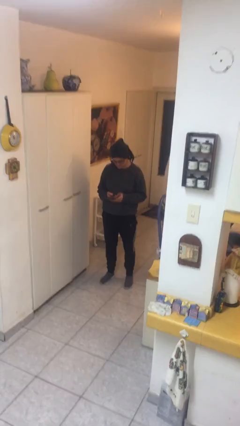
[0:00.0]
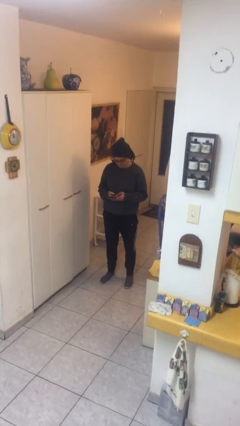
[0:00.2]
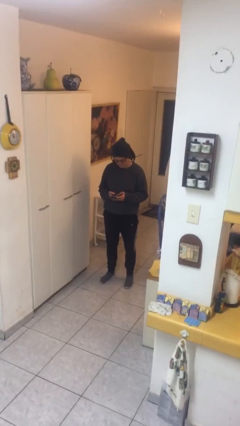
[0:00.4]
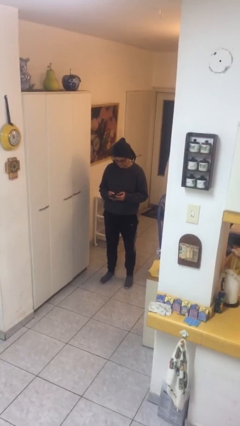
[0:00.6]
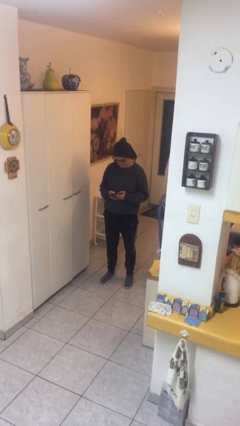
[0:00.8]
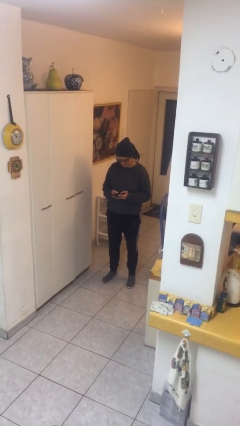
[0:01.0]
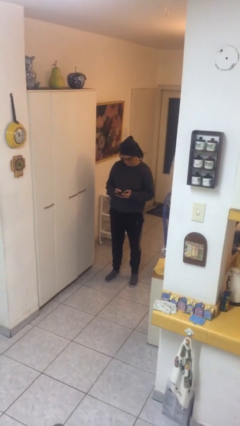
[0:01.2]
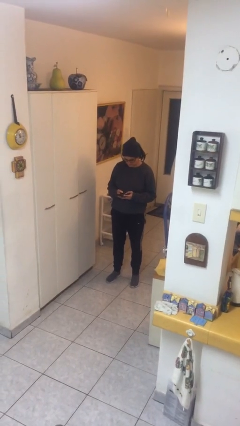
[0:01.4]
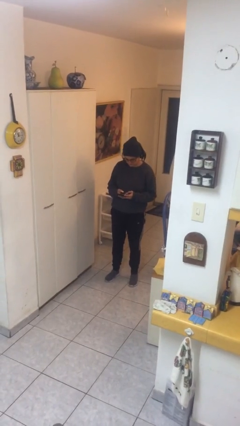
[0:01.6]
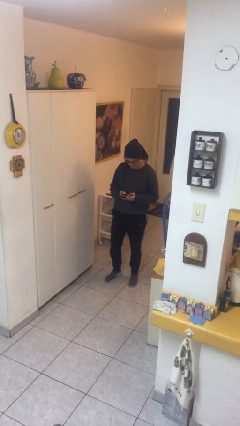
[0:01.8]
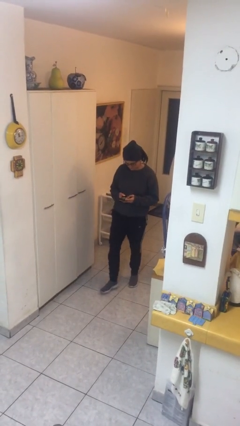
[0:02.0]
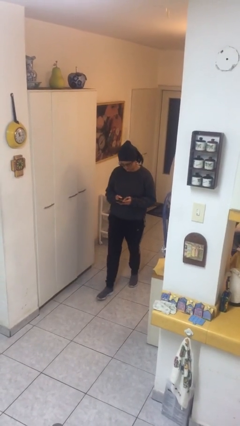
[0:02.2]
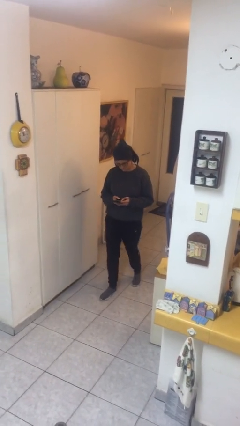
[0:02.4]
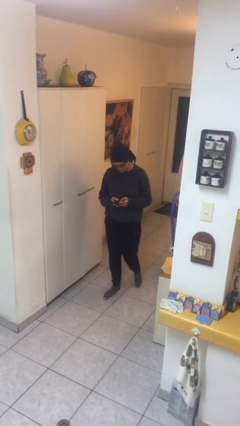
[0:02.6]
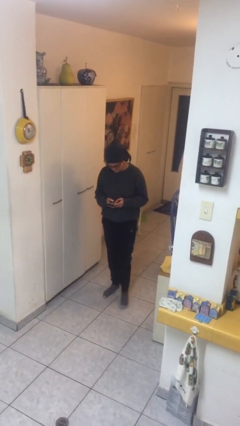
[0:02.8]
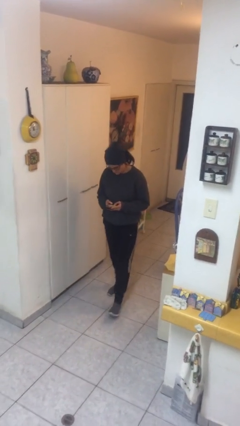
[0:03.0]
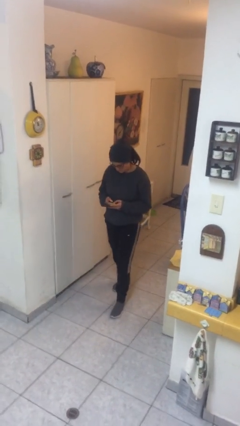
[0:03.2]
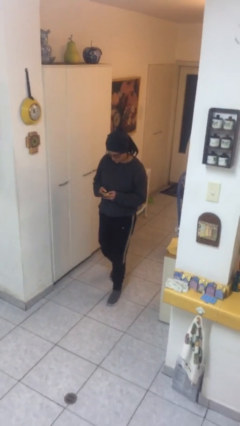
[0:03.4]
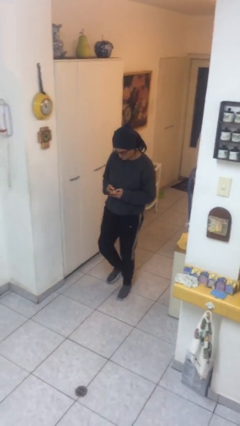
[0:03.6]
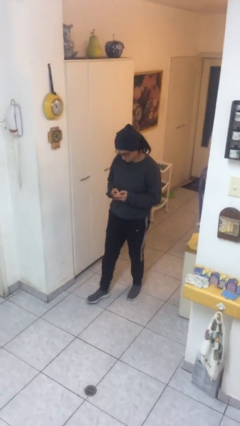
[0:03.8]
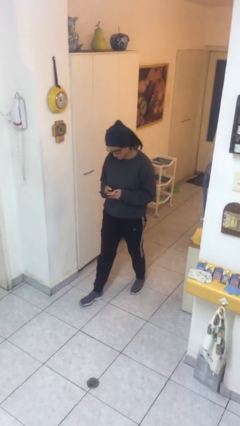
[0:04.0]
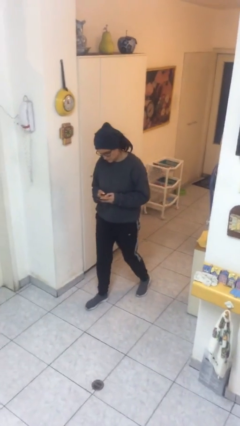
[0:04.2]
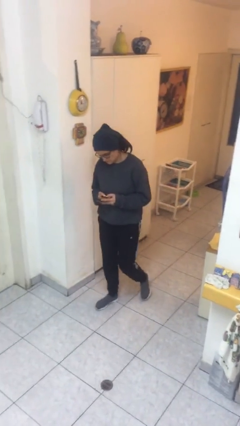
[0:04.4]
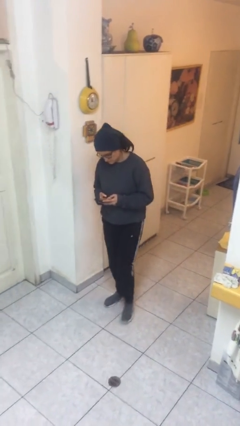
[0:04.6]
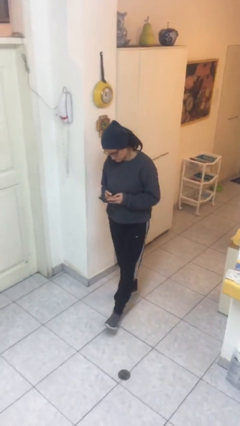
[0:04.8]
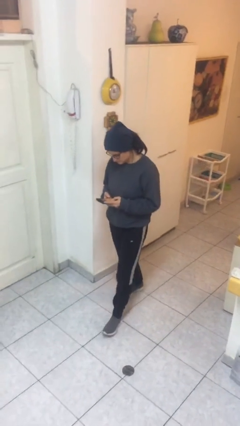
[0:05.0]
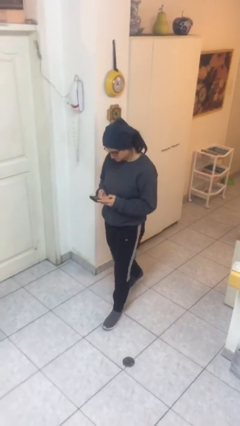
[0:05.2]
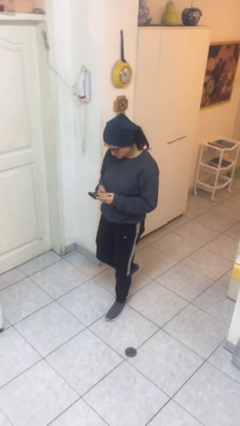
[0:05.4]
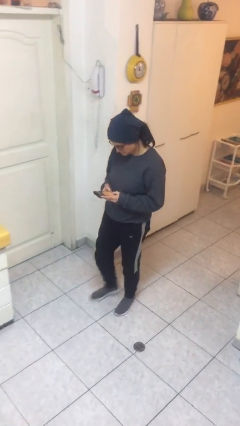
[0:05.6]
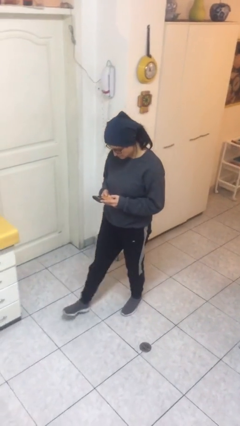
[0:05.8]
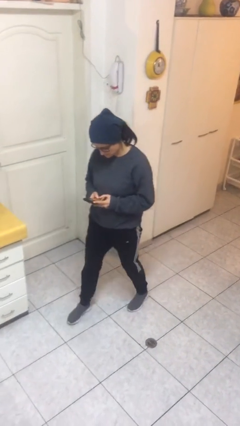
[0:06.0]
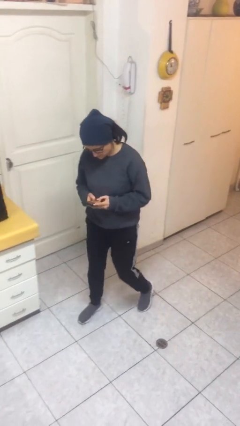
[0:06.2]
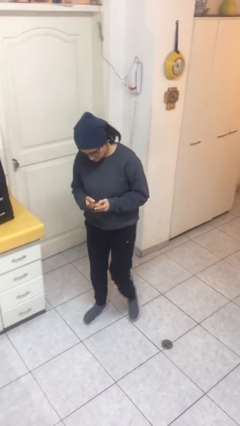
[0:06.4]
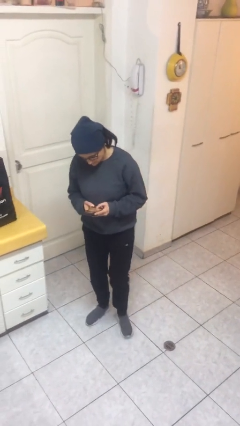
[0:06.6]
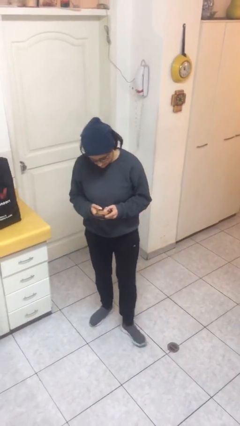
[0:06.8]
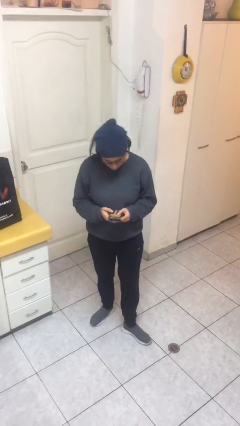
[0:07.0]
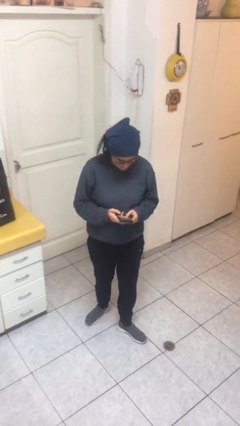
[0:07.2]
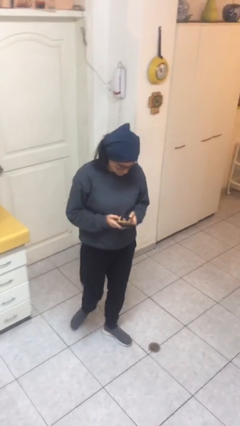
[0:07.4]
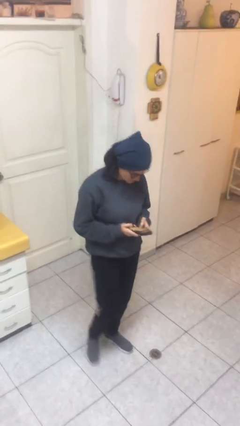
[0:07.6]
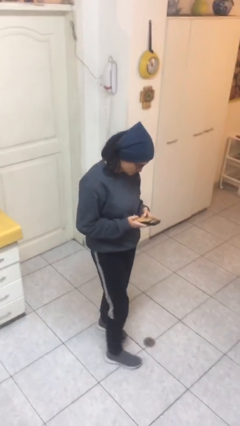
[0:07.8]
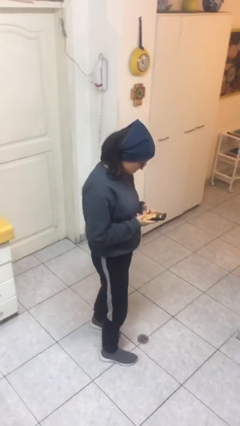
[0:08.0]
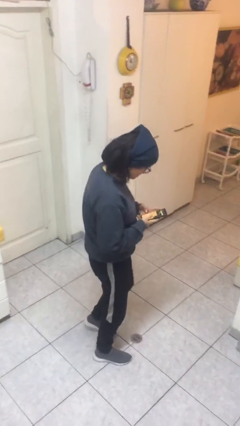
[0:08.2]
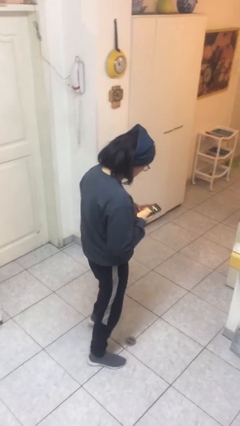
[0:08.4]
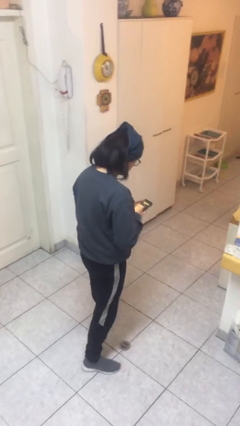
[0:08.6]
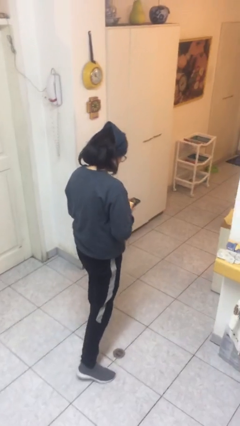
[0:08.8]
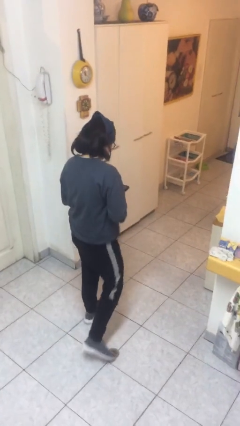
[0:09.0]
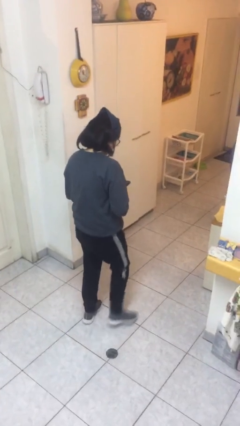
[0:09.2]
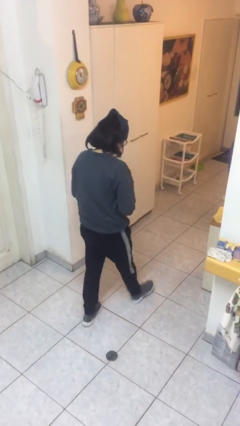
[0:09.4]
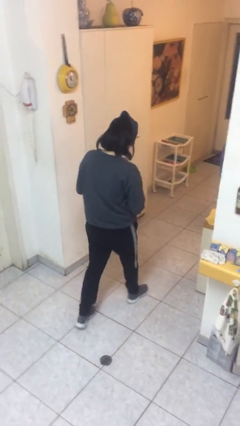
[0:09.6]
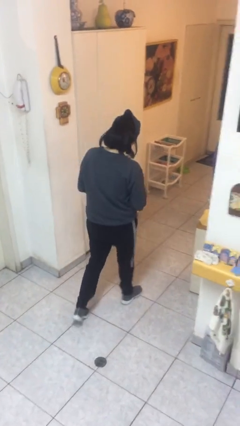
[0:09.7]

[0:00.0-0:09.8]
person texts on phone

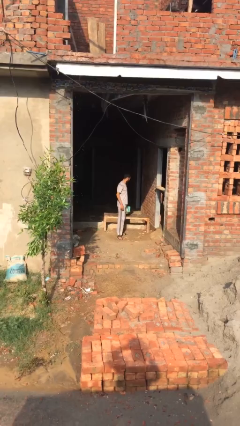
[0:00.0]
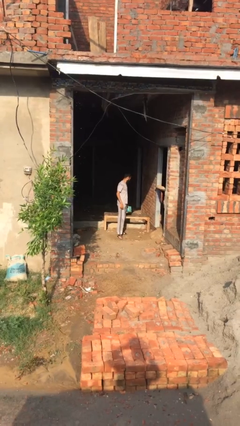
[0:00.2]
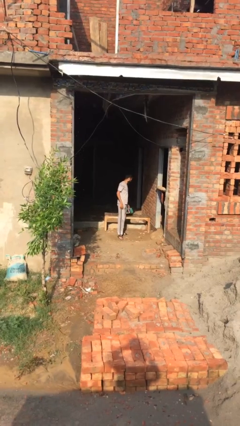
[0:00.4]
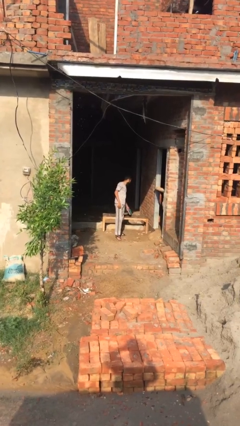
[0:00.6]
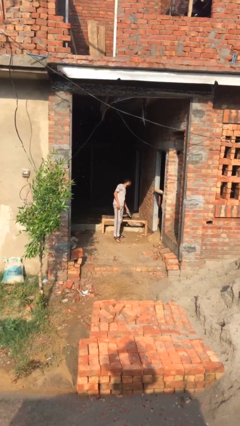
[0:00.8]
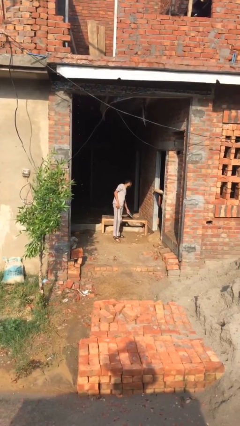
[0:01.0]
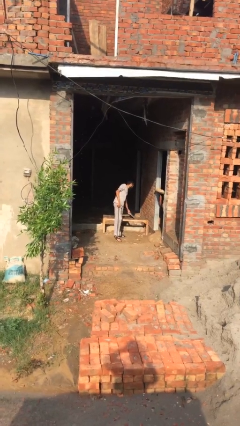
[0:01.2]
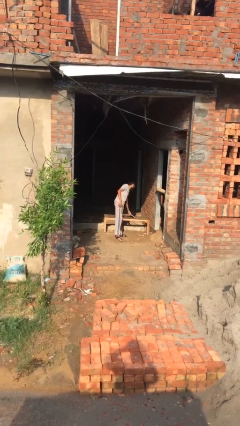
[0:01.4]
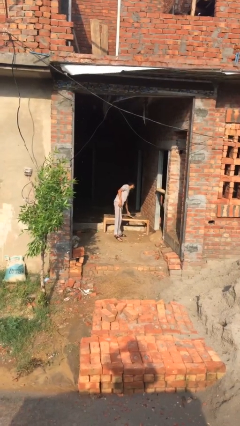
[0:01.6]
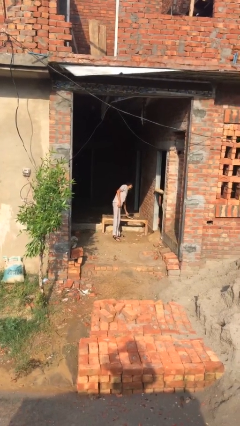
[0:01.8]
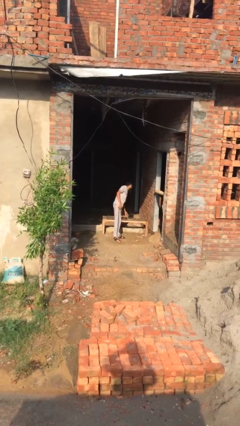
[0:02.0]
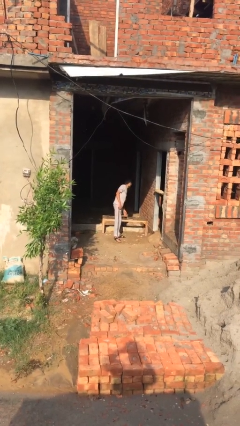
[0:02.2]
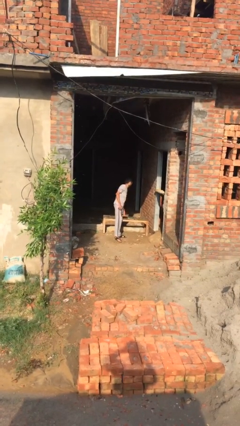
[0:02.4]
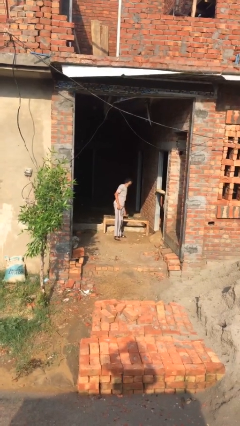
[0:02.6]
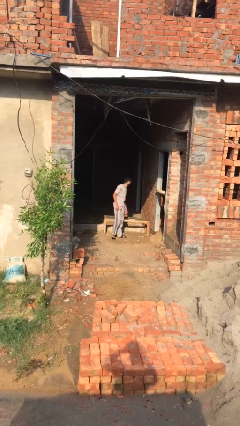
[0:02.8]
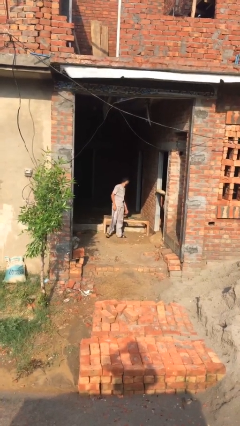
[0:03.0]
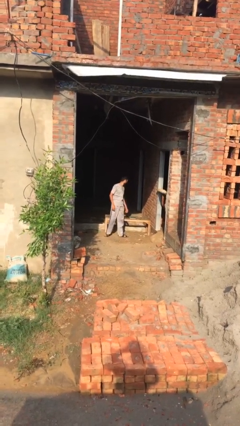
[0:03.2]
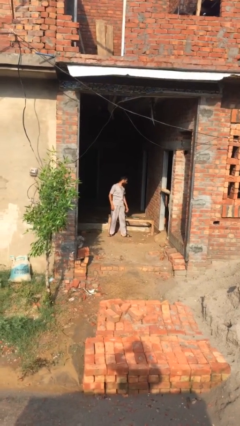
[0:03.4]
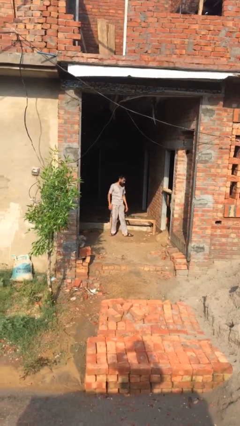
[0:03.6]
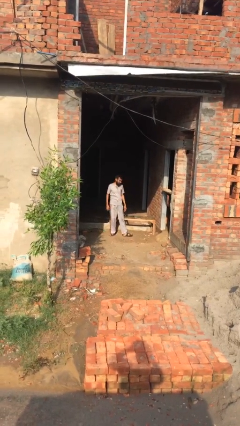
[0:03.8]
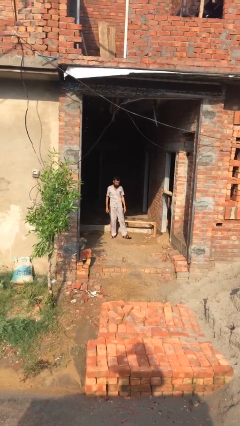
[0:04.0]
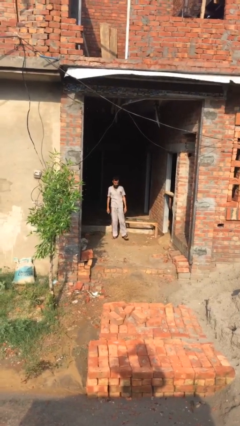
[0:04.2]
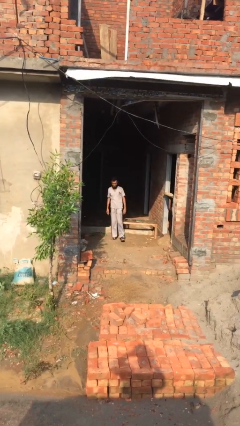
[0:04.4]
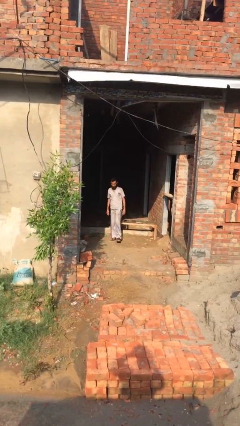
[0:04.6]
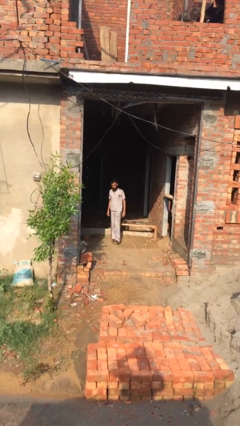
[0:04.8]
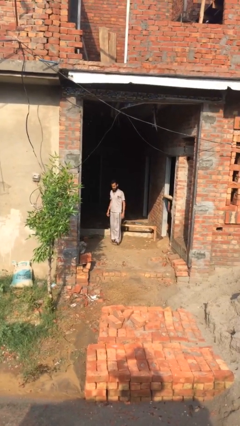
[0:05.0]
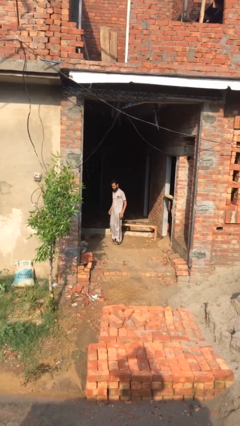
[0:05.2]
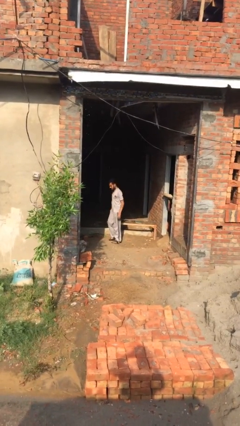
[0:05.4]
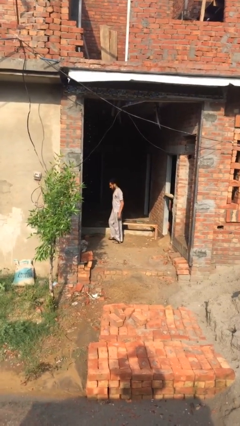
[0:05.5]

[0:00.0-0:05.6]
person puts down object on table

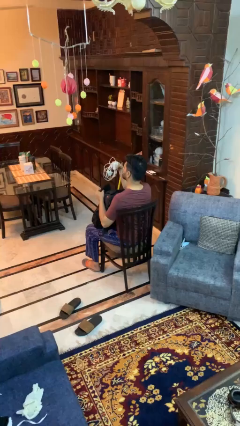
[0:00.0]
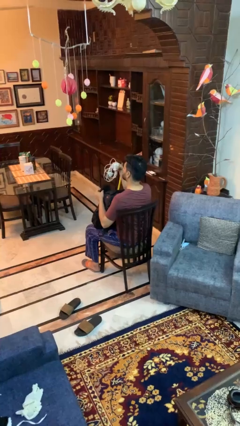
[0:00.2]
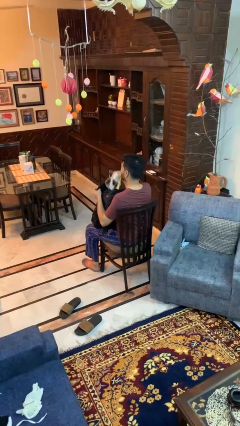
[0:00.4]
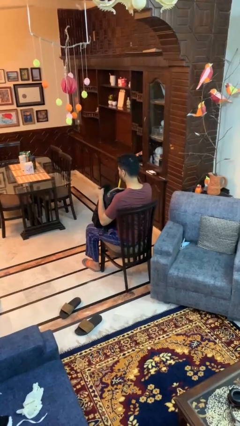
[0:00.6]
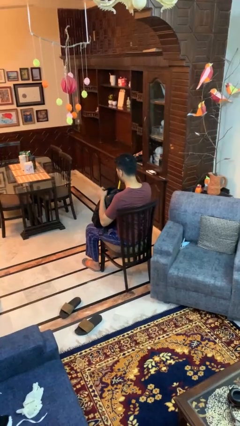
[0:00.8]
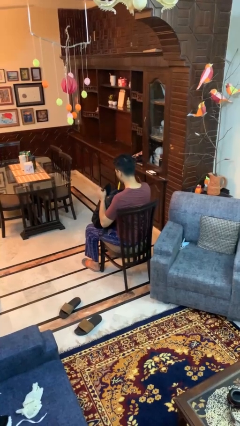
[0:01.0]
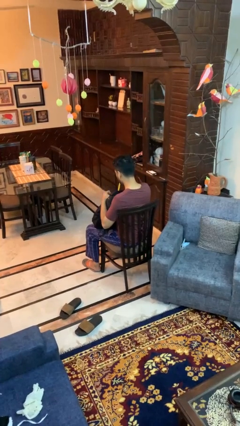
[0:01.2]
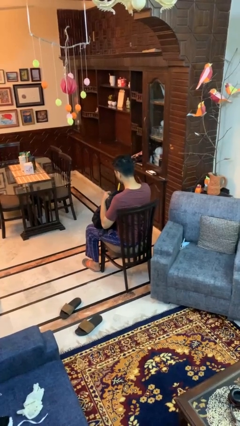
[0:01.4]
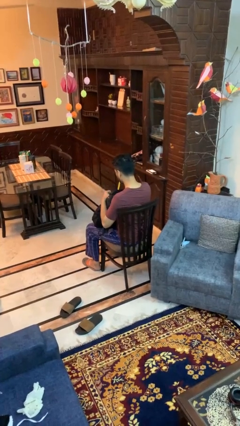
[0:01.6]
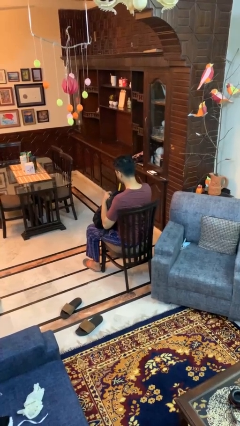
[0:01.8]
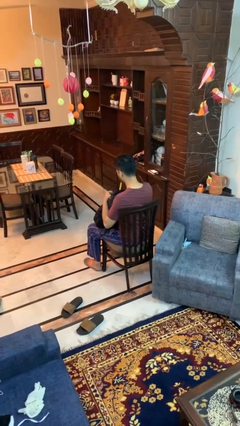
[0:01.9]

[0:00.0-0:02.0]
person puts object into backpack

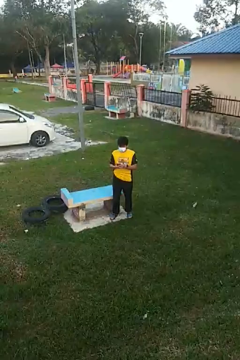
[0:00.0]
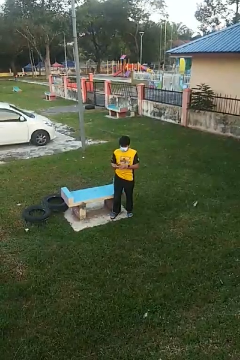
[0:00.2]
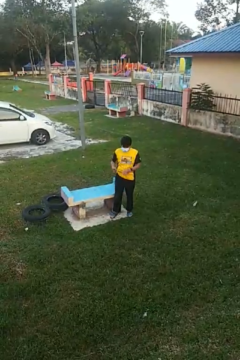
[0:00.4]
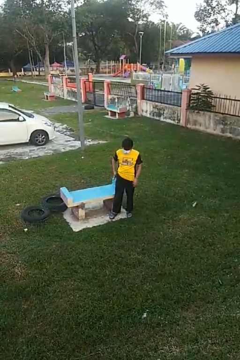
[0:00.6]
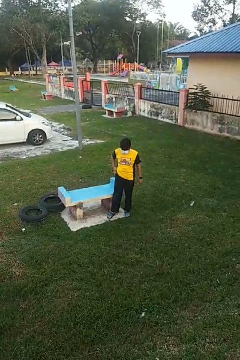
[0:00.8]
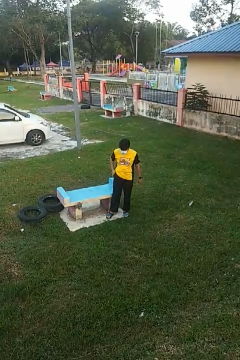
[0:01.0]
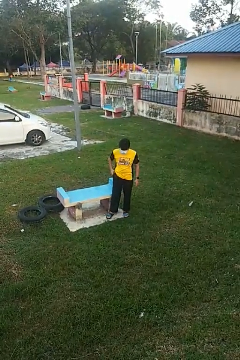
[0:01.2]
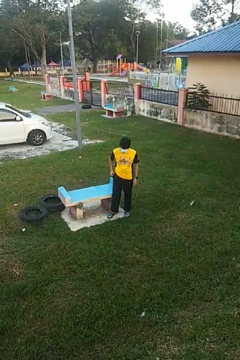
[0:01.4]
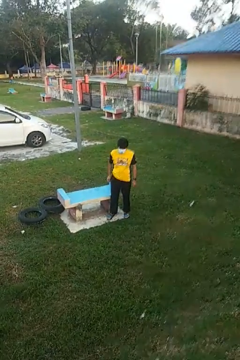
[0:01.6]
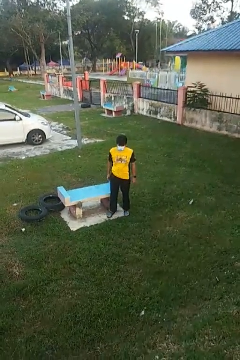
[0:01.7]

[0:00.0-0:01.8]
person puts phone into pocket
